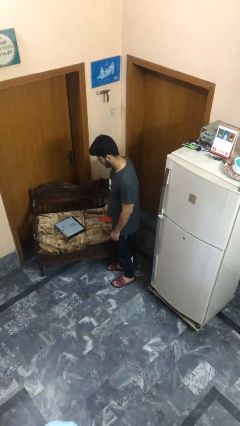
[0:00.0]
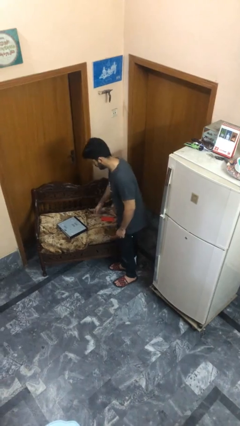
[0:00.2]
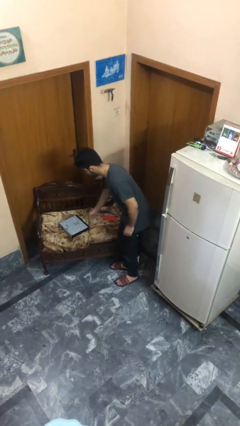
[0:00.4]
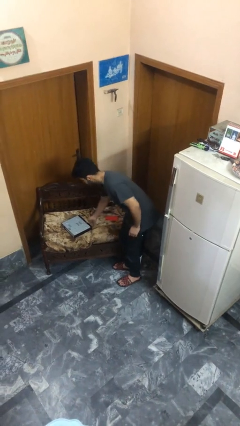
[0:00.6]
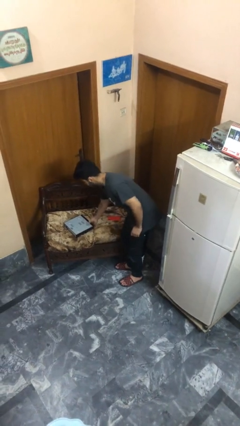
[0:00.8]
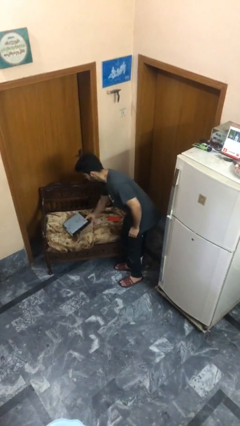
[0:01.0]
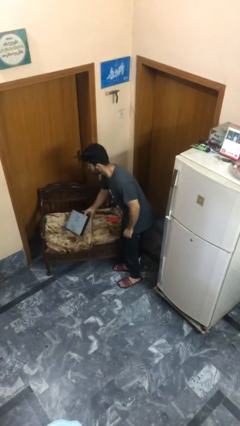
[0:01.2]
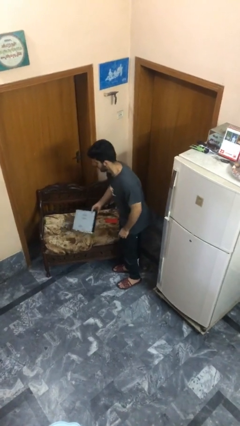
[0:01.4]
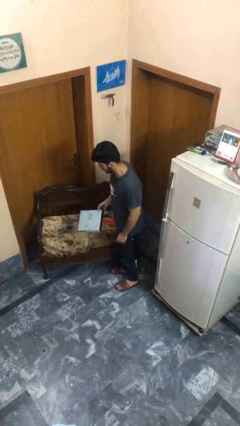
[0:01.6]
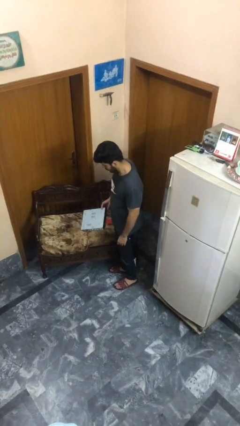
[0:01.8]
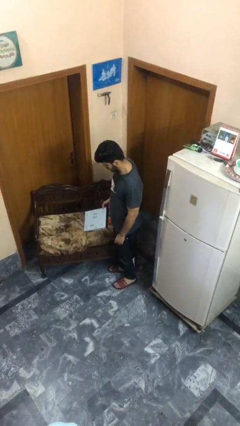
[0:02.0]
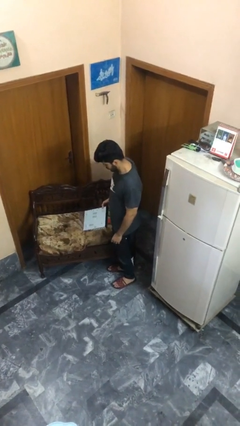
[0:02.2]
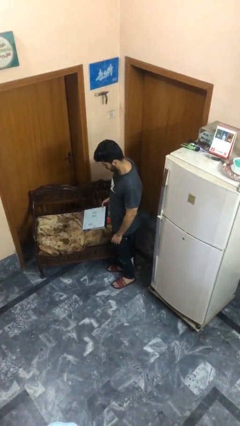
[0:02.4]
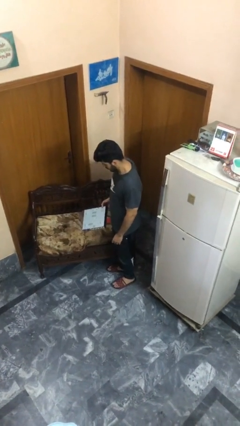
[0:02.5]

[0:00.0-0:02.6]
person picks up object from couch

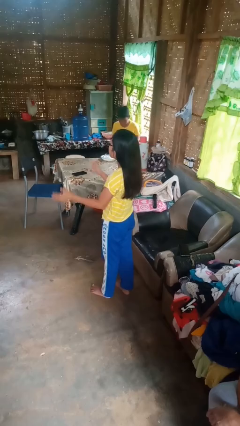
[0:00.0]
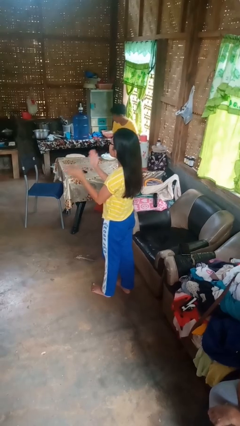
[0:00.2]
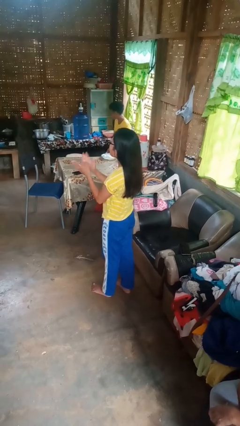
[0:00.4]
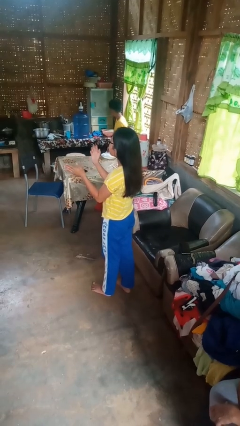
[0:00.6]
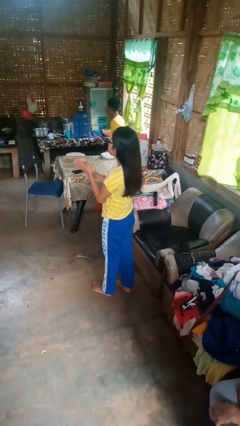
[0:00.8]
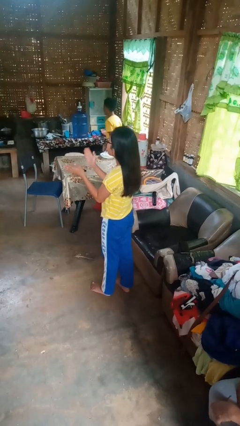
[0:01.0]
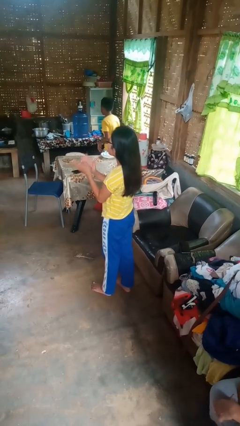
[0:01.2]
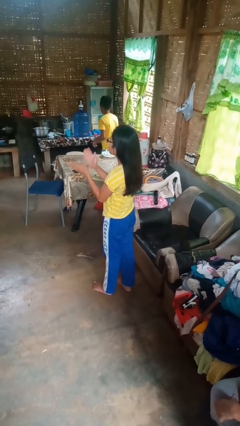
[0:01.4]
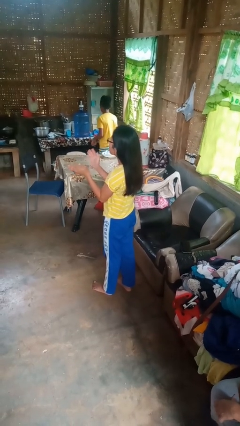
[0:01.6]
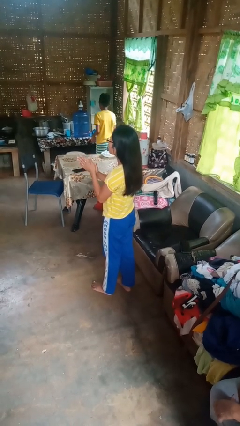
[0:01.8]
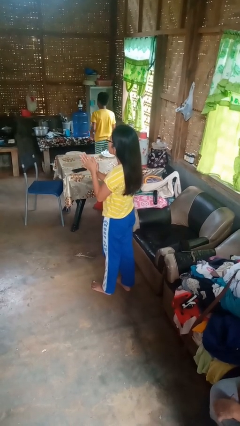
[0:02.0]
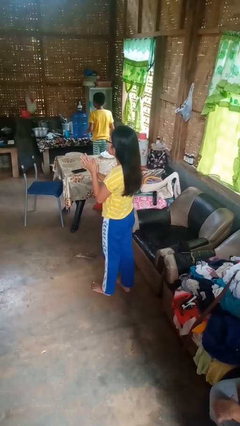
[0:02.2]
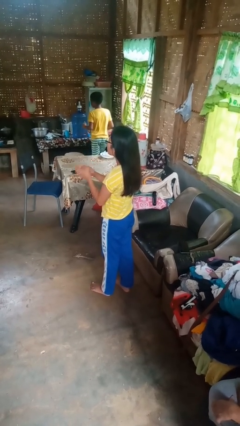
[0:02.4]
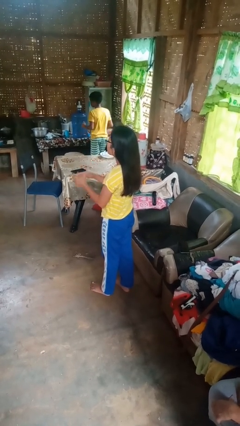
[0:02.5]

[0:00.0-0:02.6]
person claps hands

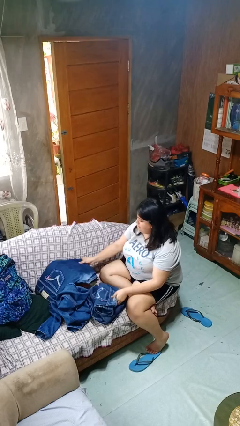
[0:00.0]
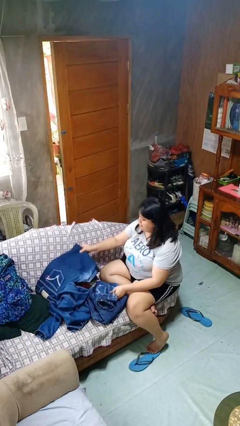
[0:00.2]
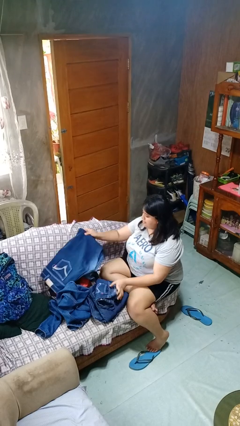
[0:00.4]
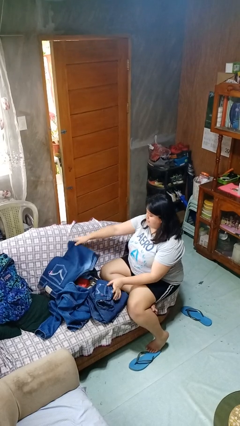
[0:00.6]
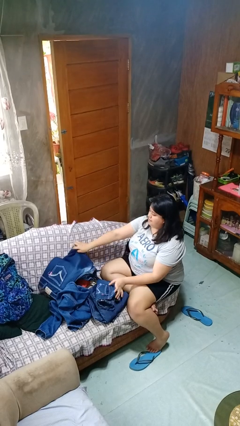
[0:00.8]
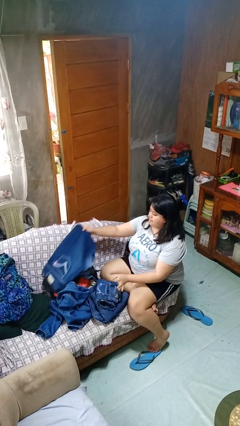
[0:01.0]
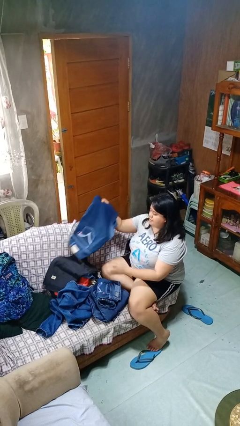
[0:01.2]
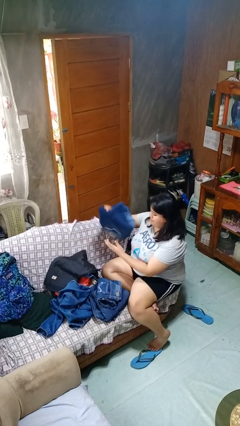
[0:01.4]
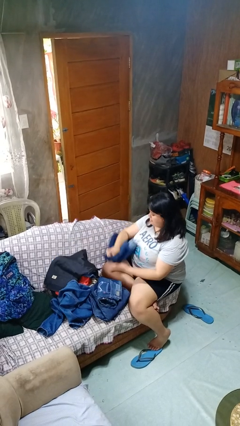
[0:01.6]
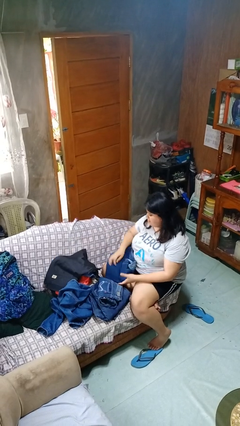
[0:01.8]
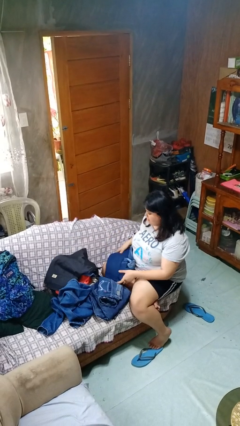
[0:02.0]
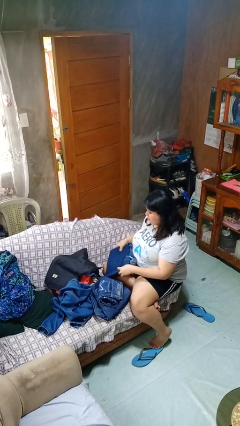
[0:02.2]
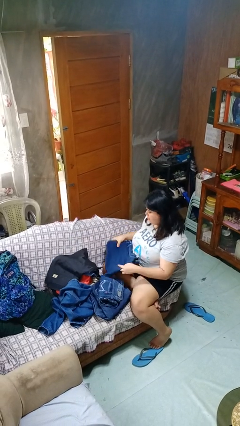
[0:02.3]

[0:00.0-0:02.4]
person folds pants

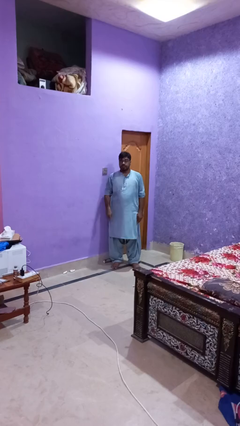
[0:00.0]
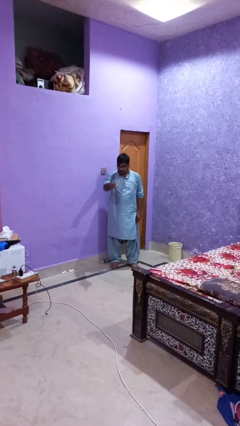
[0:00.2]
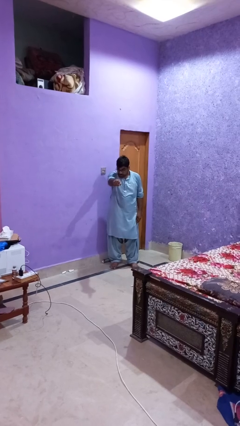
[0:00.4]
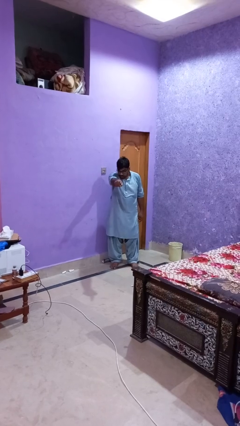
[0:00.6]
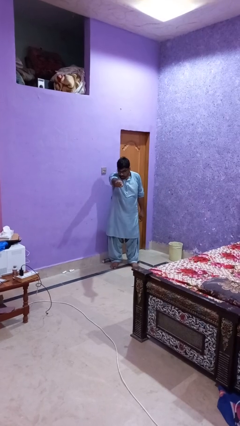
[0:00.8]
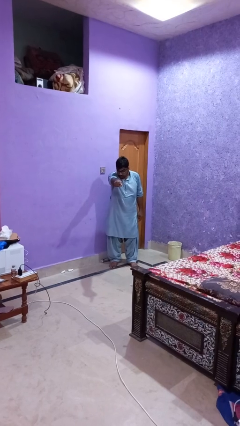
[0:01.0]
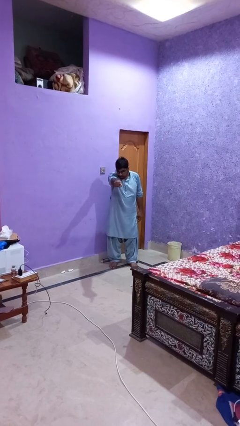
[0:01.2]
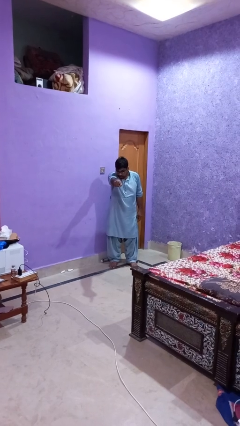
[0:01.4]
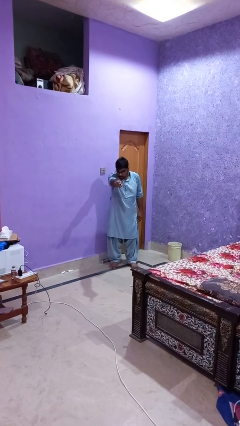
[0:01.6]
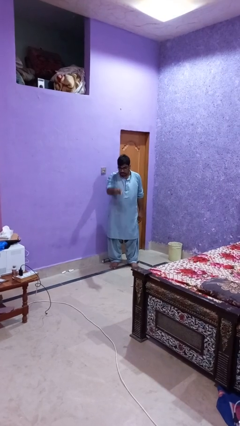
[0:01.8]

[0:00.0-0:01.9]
person points at person

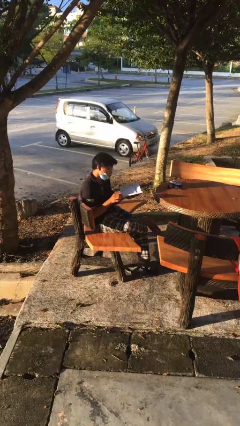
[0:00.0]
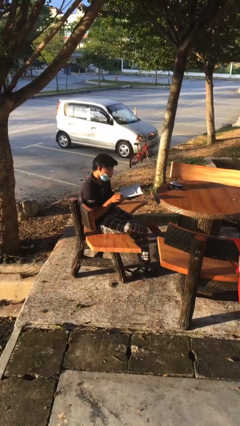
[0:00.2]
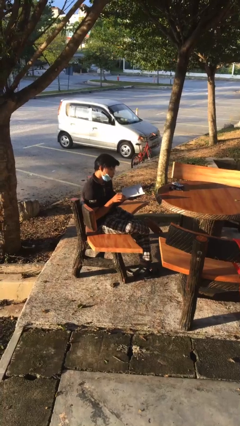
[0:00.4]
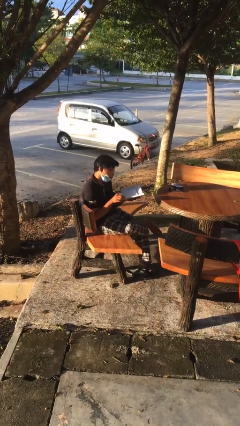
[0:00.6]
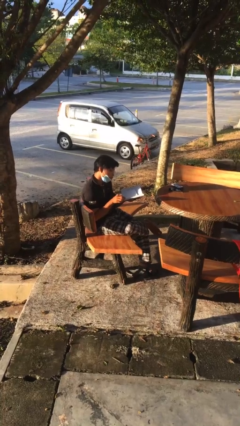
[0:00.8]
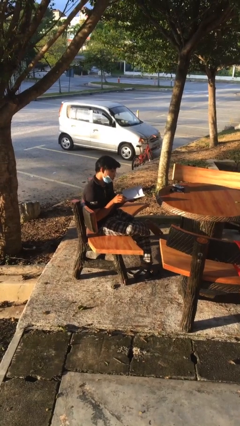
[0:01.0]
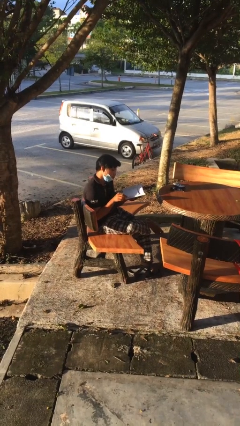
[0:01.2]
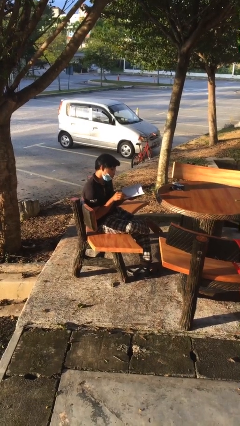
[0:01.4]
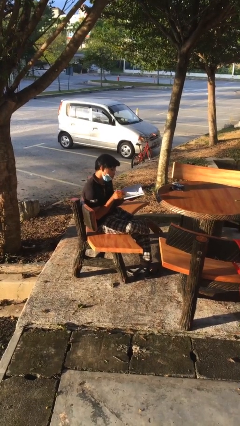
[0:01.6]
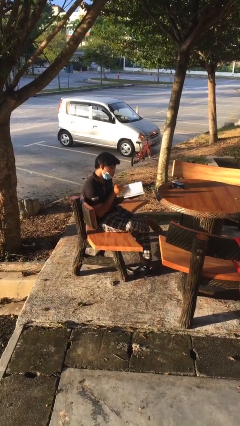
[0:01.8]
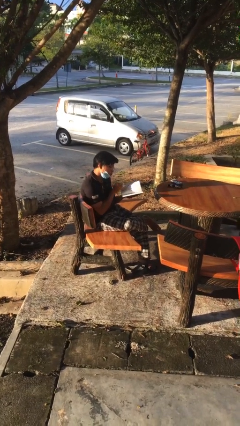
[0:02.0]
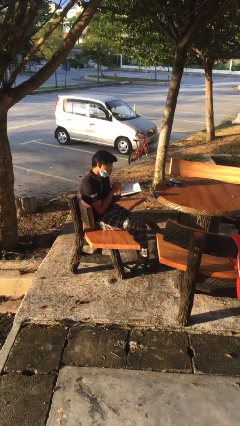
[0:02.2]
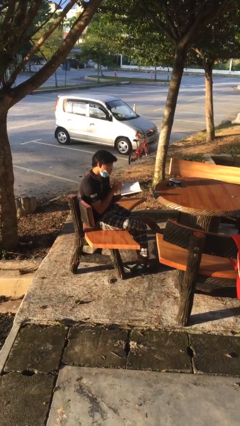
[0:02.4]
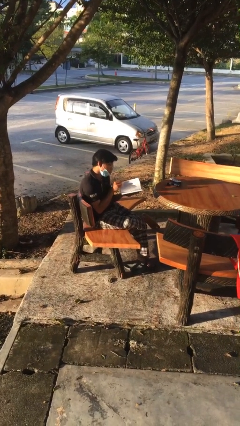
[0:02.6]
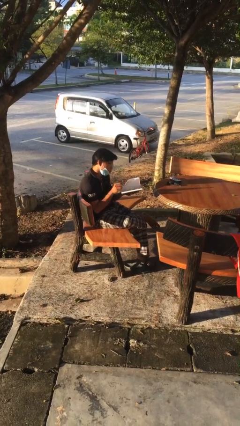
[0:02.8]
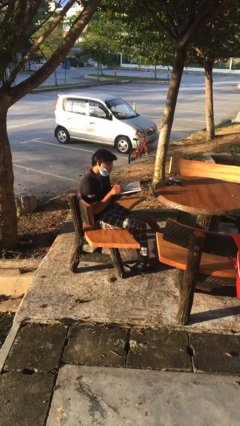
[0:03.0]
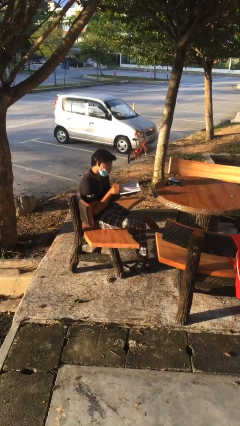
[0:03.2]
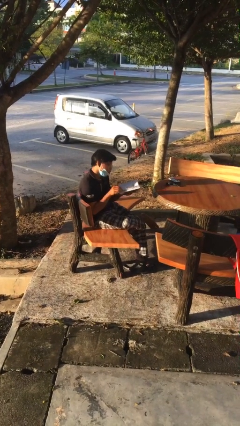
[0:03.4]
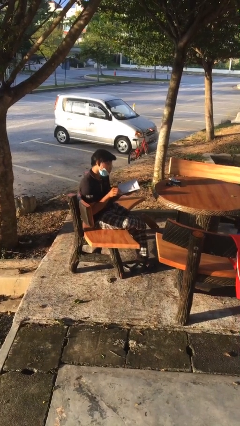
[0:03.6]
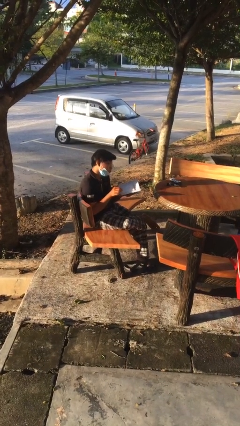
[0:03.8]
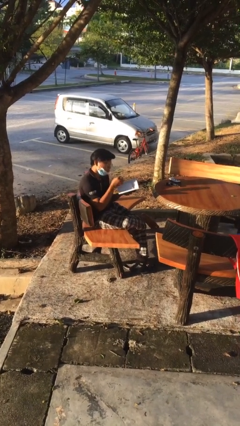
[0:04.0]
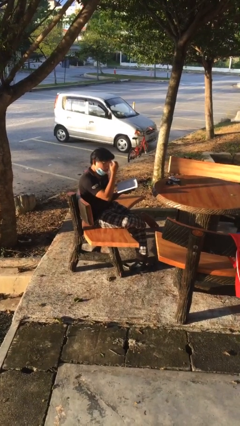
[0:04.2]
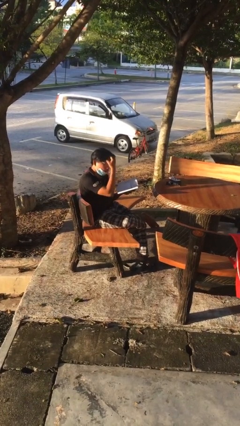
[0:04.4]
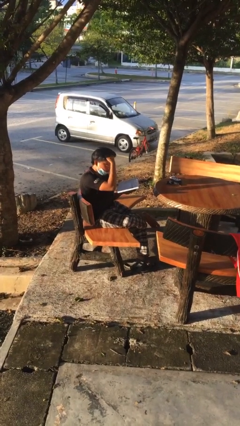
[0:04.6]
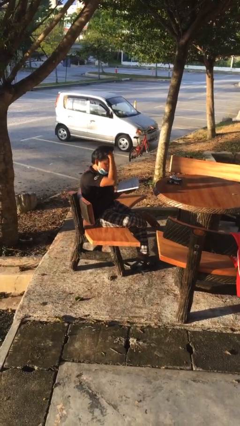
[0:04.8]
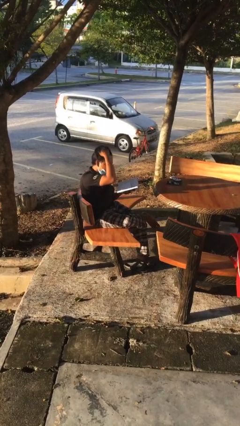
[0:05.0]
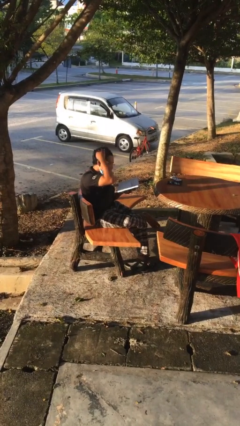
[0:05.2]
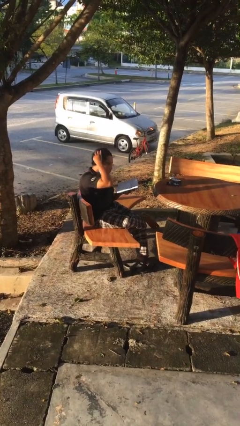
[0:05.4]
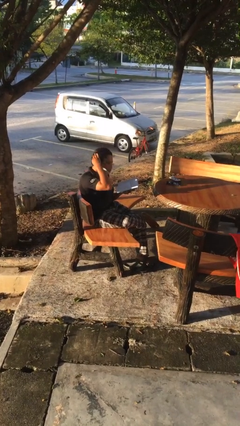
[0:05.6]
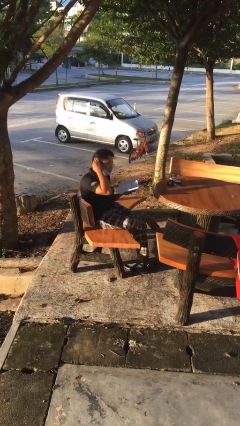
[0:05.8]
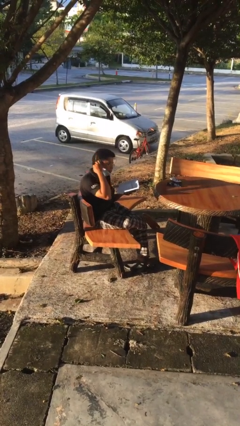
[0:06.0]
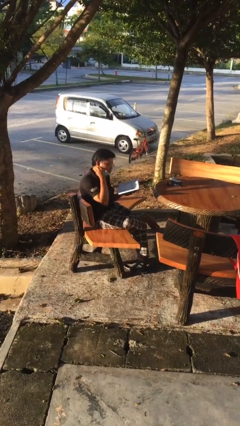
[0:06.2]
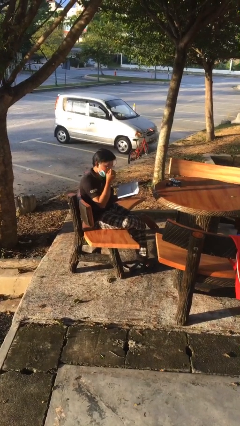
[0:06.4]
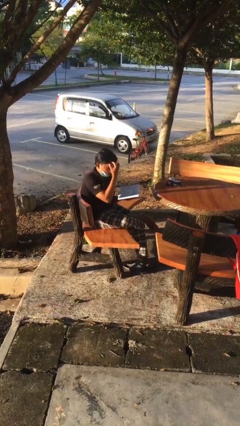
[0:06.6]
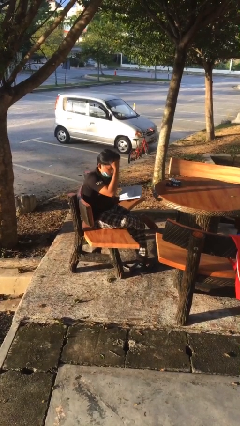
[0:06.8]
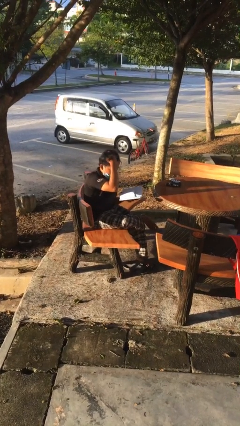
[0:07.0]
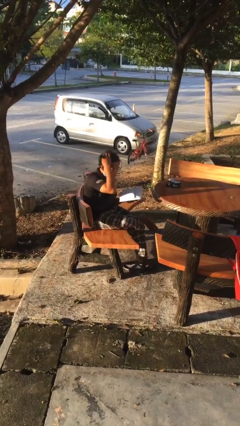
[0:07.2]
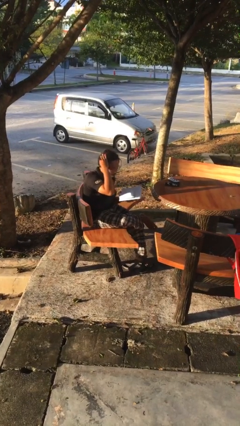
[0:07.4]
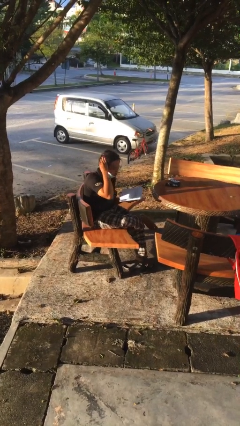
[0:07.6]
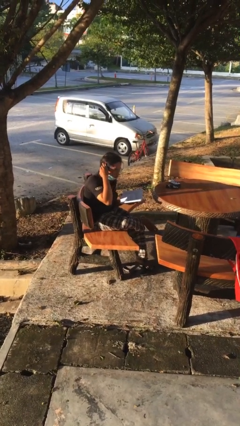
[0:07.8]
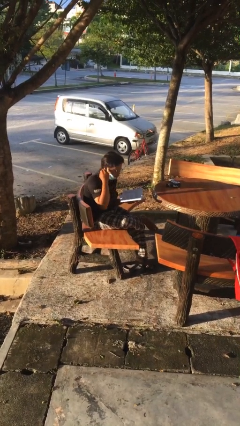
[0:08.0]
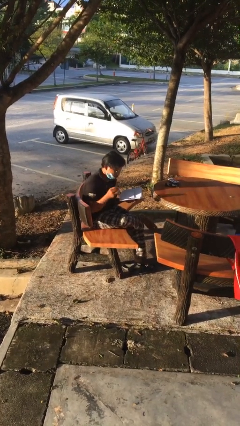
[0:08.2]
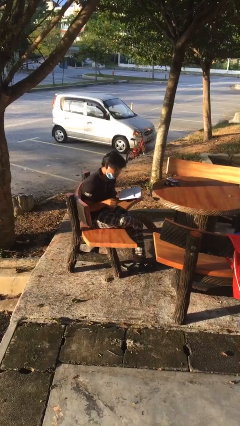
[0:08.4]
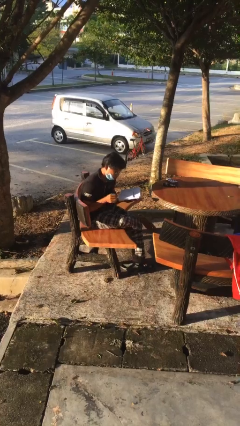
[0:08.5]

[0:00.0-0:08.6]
person reads document
